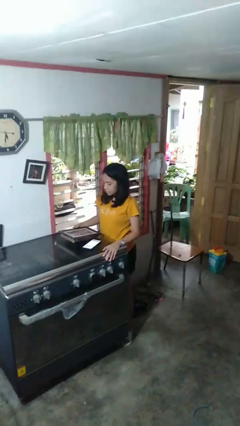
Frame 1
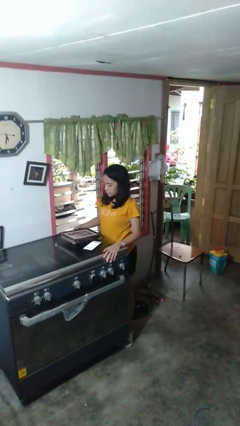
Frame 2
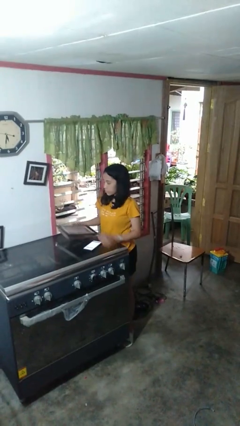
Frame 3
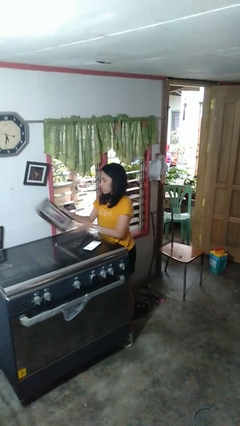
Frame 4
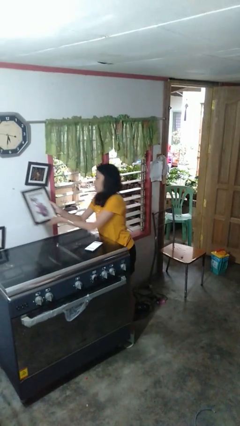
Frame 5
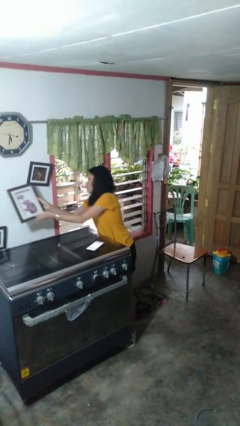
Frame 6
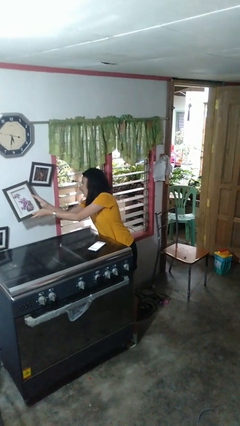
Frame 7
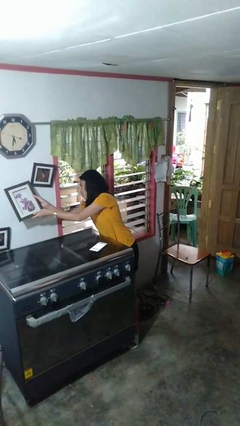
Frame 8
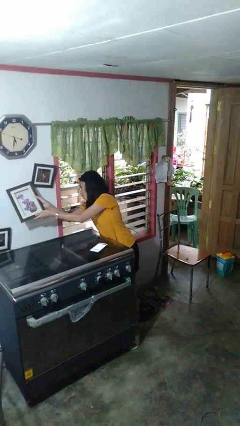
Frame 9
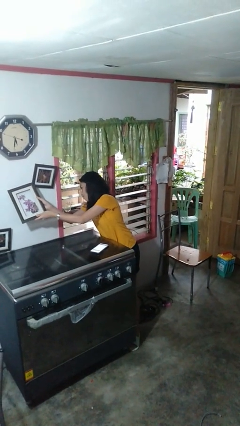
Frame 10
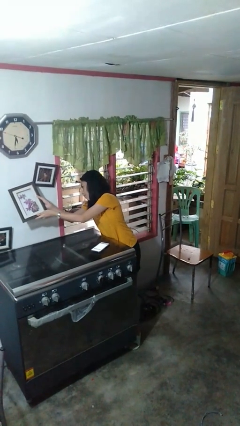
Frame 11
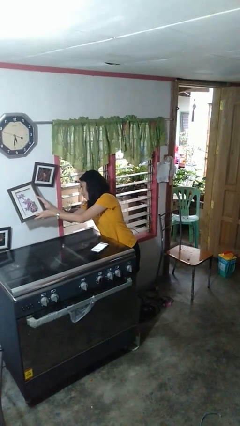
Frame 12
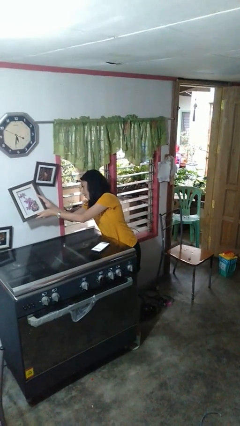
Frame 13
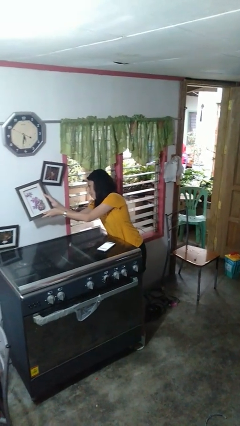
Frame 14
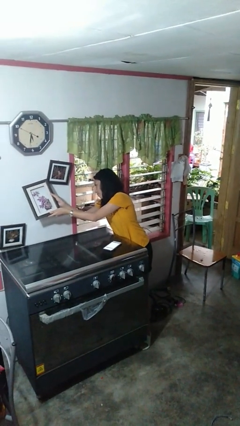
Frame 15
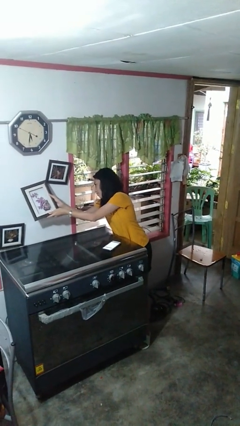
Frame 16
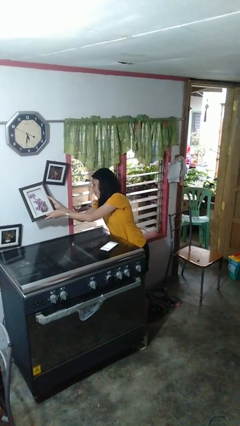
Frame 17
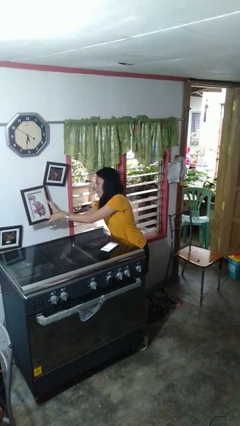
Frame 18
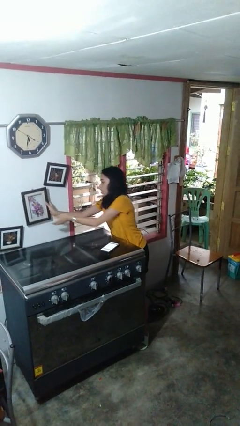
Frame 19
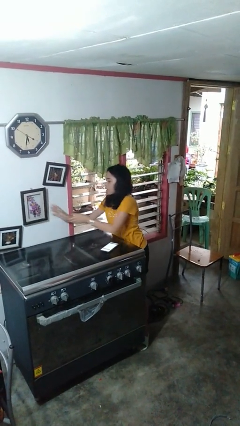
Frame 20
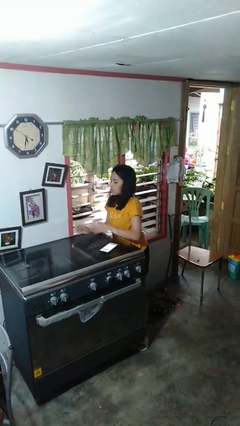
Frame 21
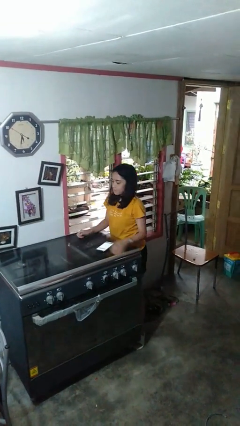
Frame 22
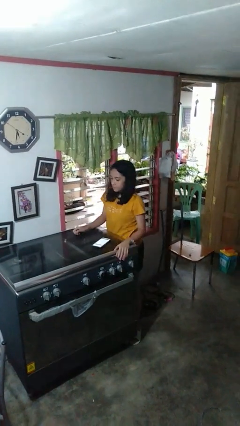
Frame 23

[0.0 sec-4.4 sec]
person puts up picture frame

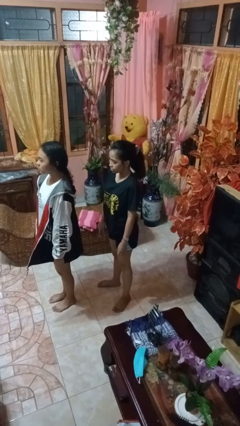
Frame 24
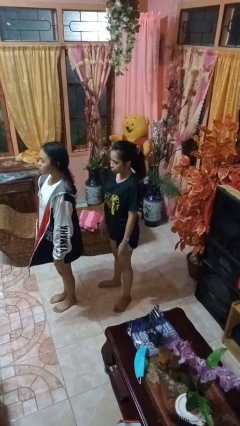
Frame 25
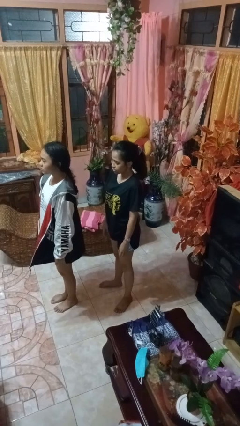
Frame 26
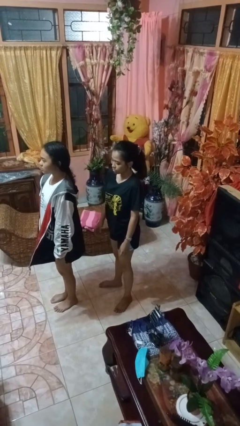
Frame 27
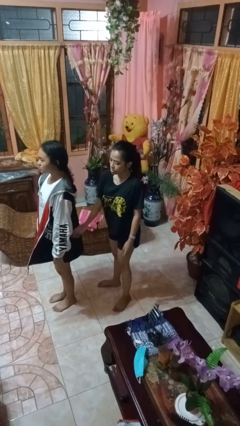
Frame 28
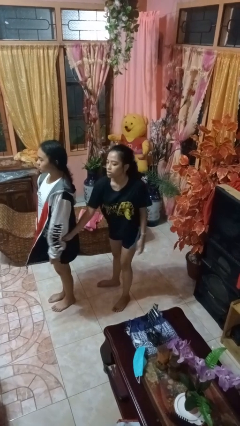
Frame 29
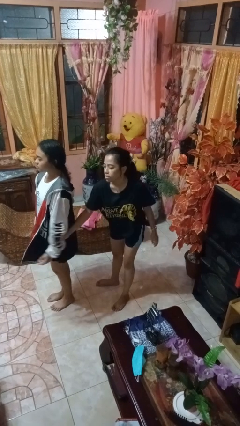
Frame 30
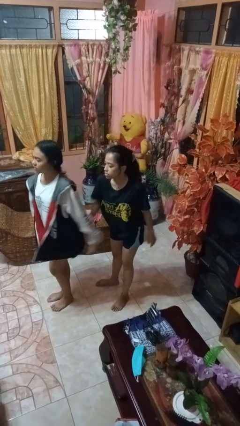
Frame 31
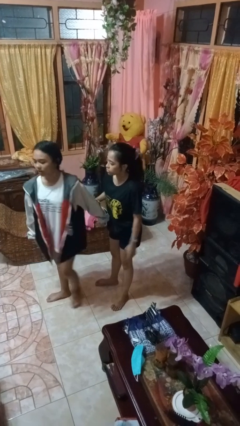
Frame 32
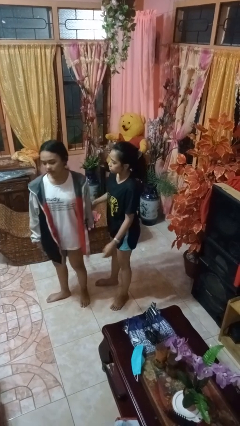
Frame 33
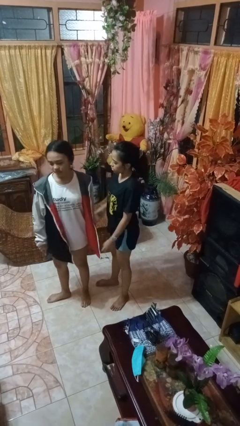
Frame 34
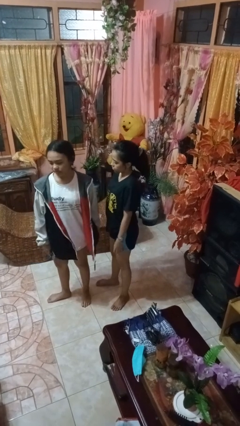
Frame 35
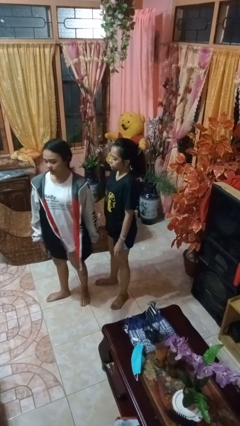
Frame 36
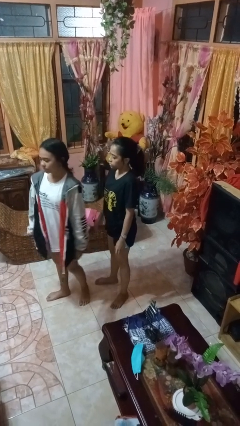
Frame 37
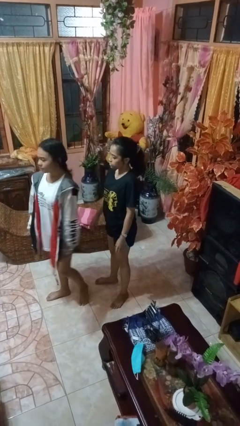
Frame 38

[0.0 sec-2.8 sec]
person grabs person by forearm

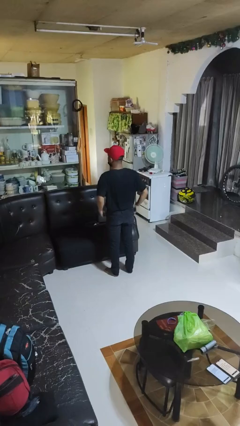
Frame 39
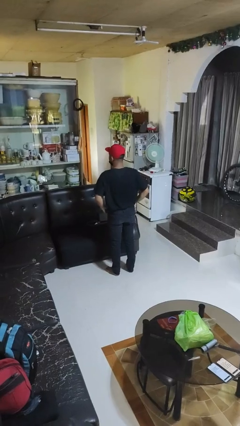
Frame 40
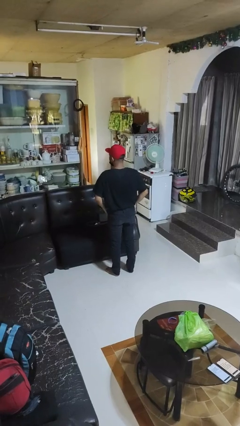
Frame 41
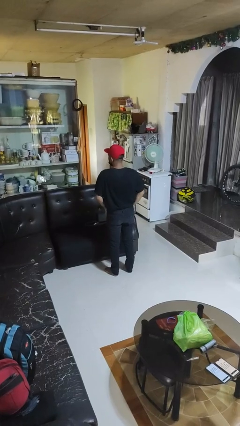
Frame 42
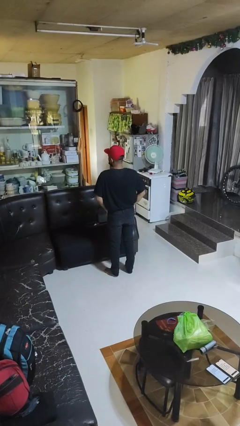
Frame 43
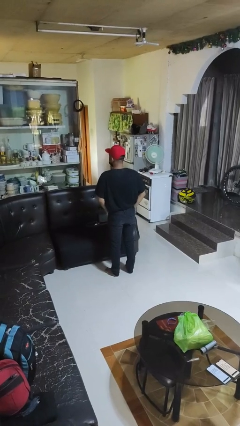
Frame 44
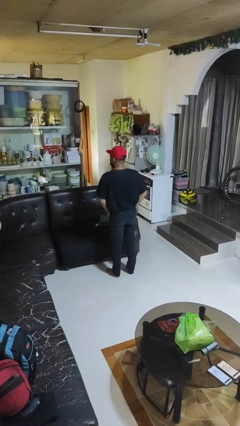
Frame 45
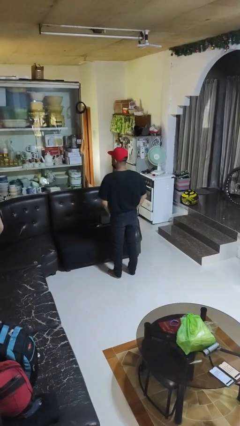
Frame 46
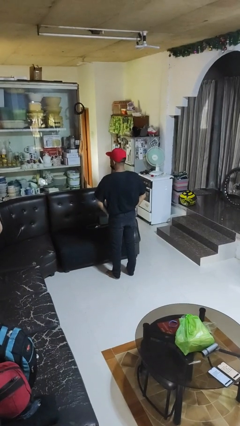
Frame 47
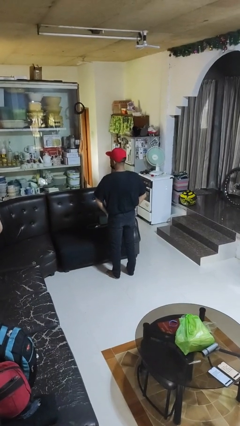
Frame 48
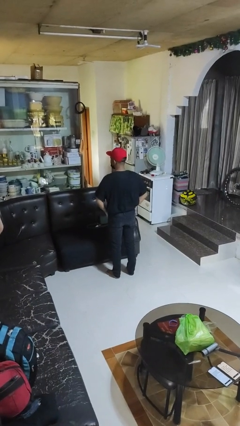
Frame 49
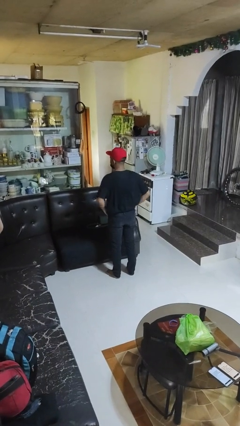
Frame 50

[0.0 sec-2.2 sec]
person puts hands in back pockets

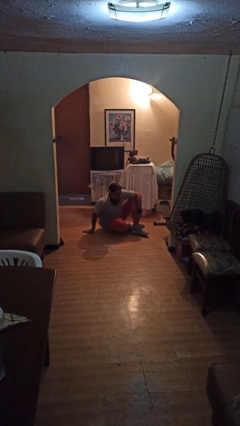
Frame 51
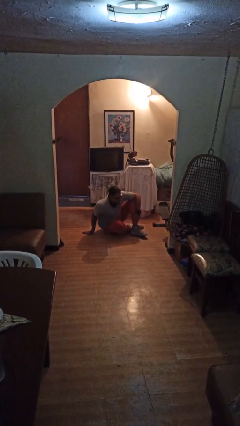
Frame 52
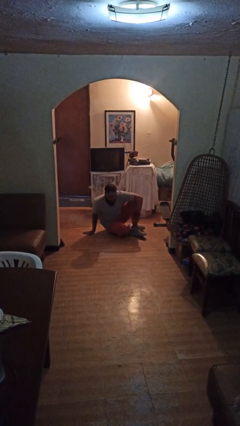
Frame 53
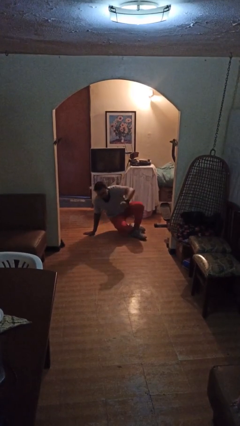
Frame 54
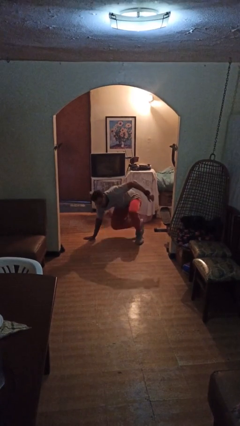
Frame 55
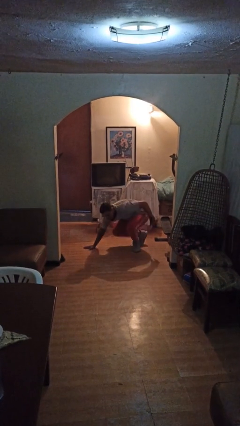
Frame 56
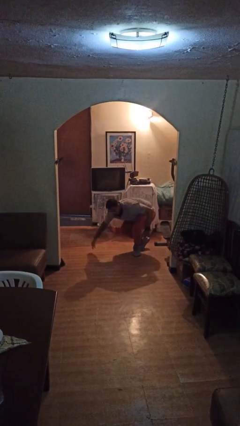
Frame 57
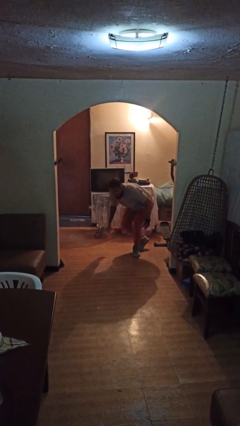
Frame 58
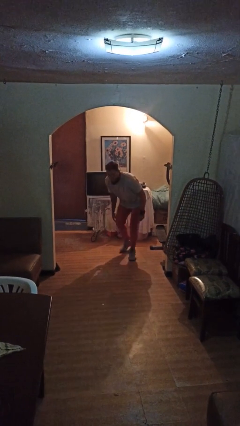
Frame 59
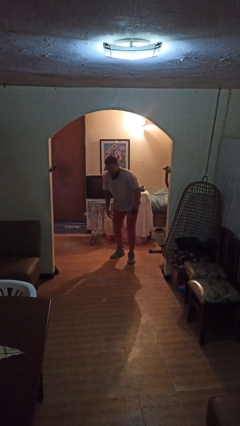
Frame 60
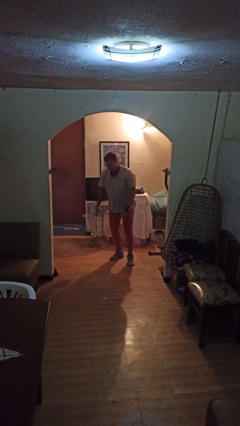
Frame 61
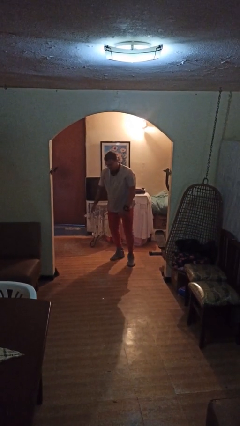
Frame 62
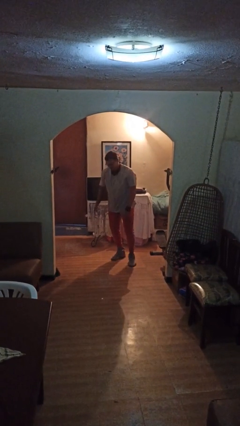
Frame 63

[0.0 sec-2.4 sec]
person stands up

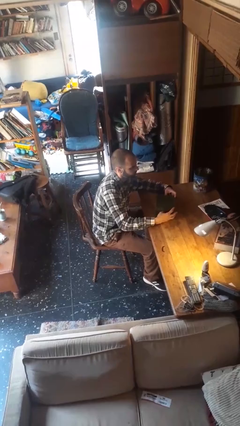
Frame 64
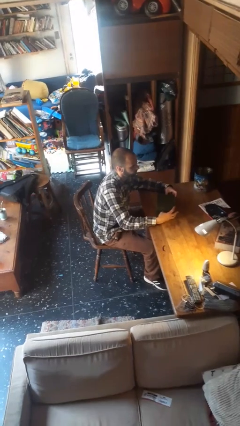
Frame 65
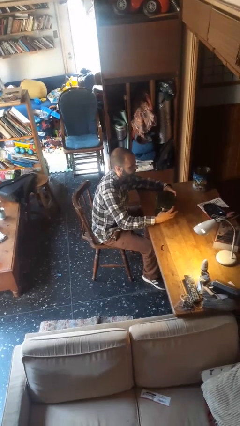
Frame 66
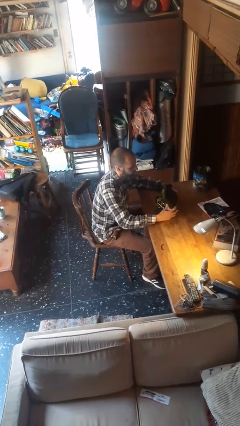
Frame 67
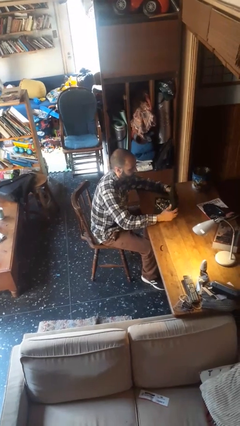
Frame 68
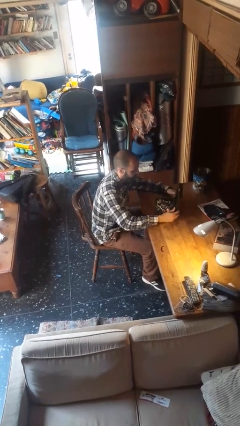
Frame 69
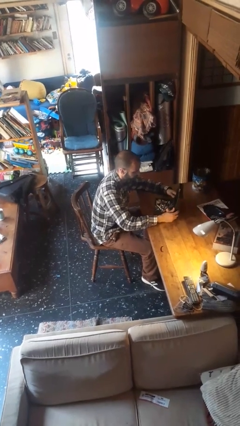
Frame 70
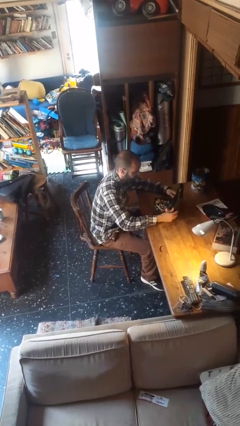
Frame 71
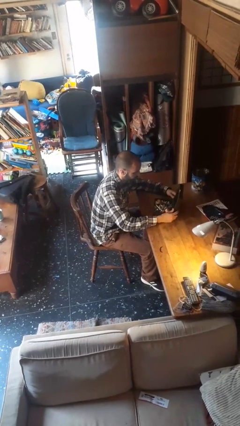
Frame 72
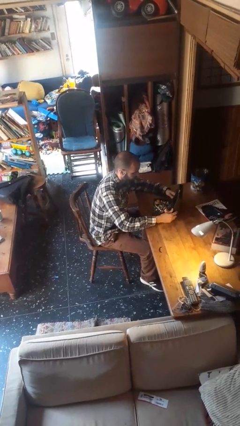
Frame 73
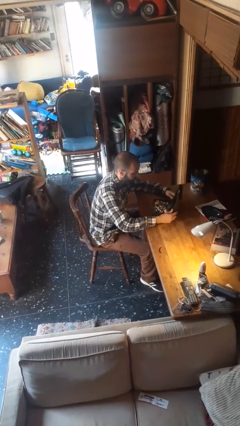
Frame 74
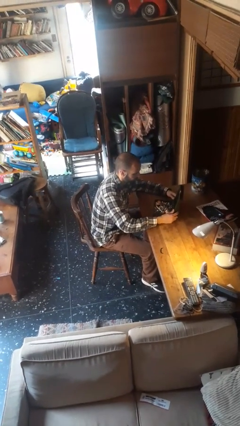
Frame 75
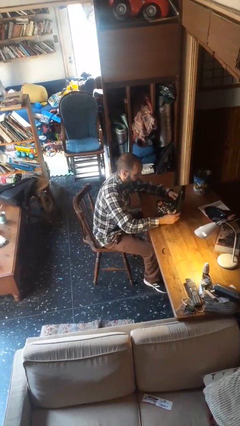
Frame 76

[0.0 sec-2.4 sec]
person opens jewelry box

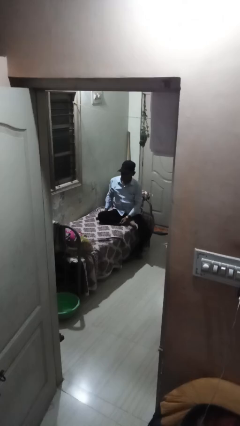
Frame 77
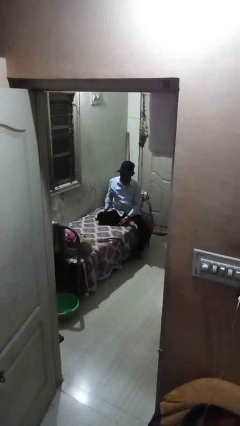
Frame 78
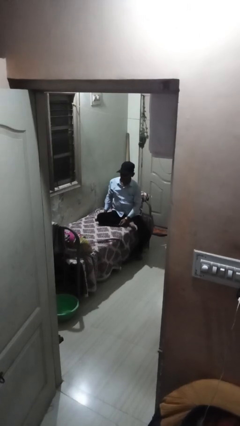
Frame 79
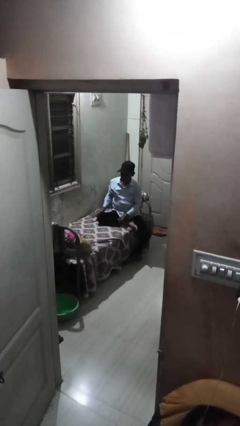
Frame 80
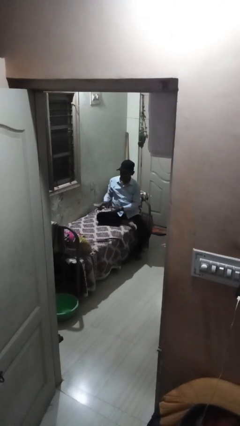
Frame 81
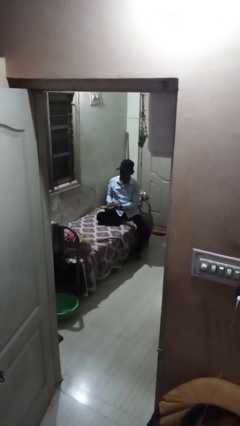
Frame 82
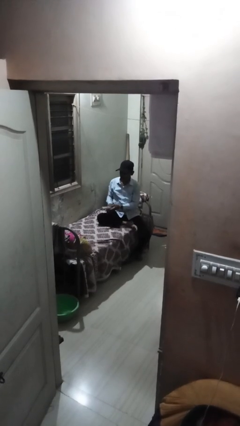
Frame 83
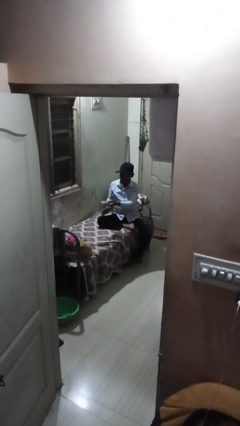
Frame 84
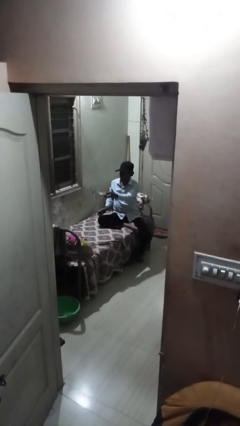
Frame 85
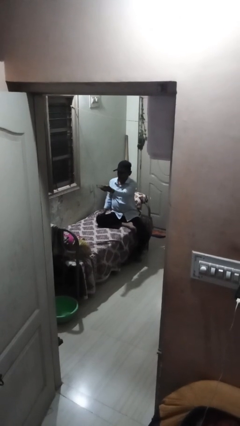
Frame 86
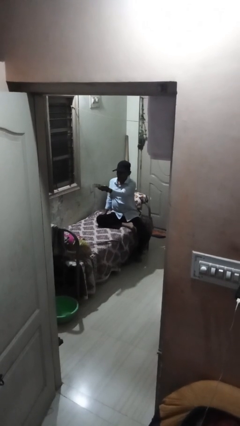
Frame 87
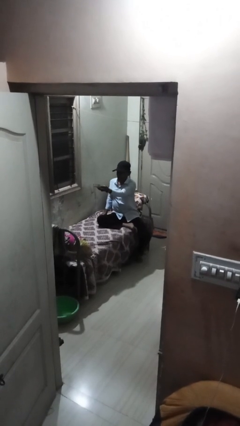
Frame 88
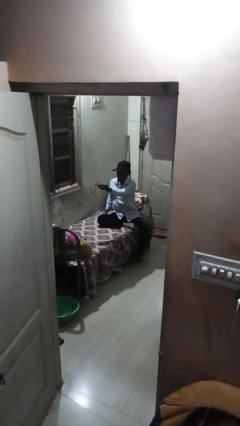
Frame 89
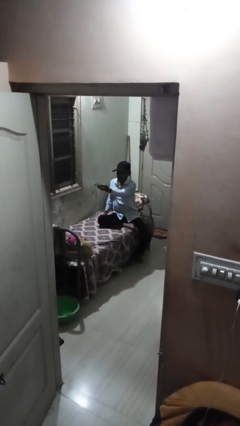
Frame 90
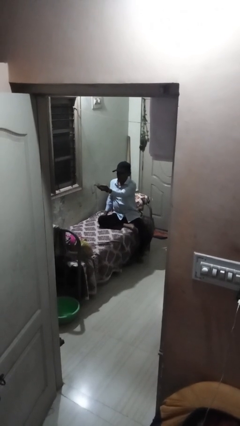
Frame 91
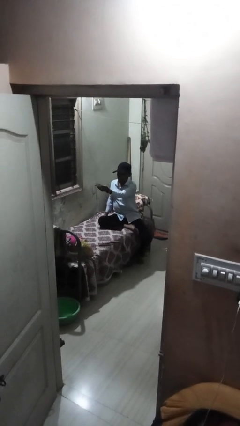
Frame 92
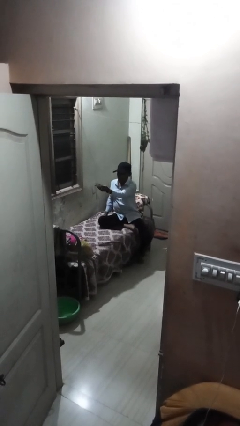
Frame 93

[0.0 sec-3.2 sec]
person uses television remote
